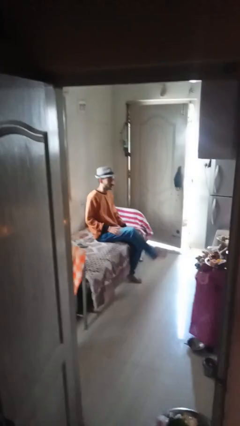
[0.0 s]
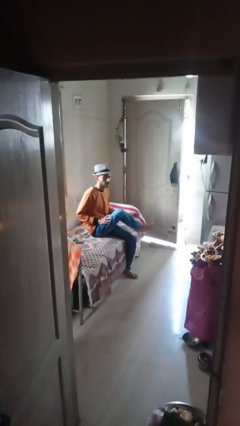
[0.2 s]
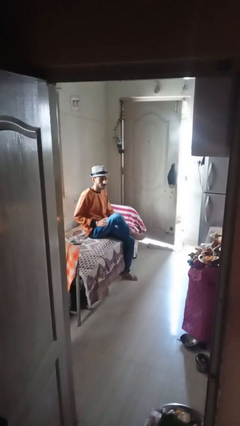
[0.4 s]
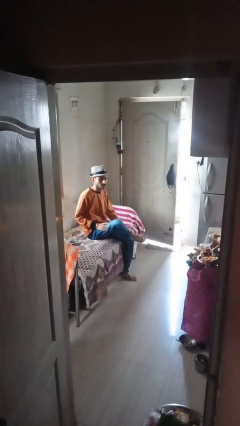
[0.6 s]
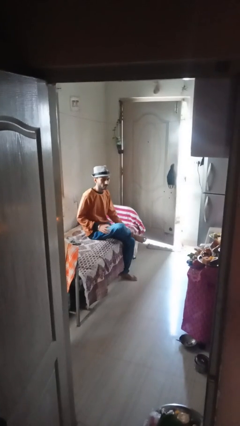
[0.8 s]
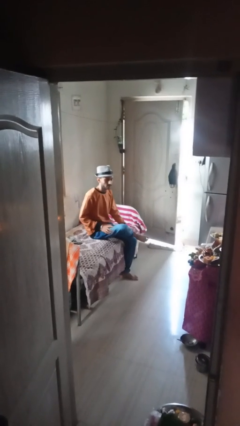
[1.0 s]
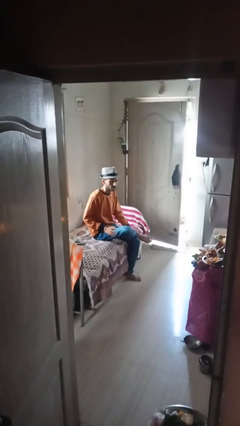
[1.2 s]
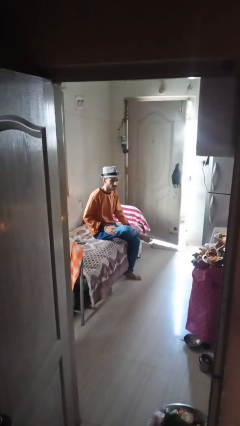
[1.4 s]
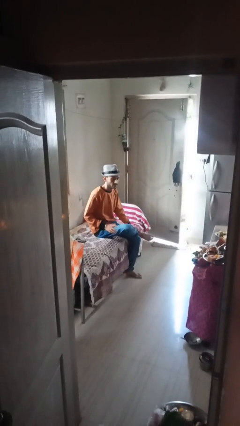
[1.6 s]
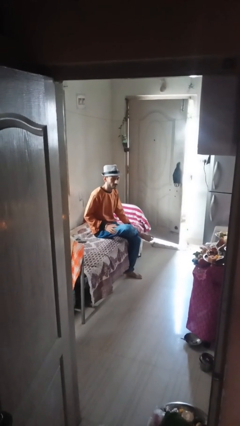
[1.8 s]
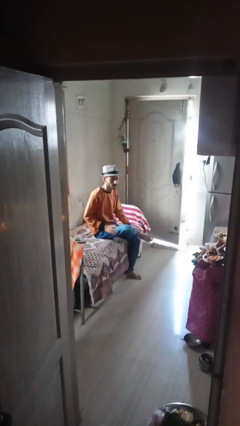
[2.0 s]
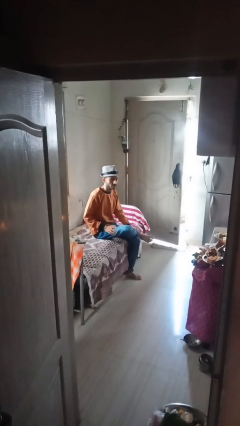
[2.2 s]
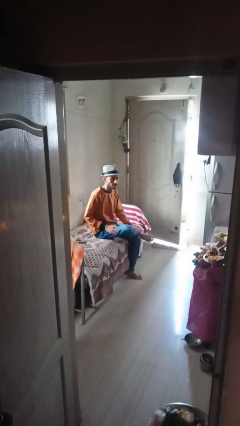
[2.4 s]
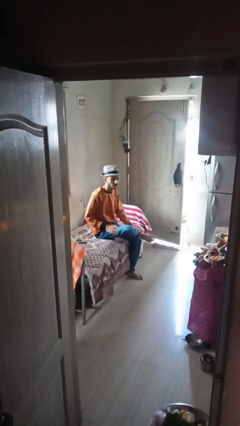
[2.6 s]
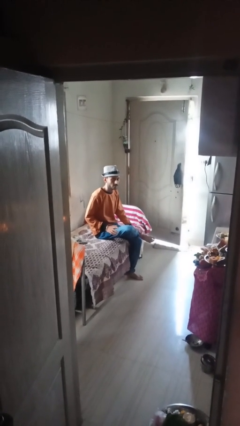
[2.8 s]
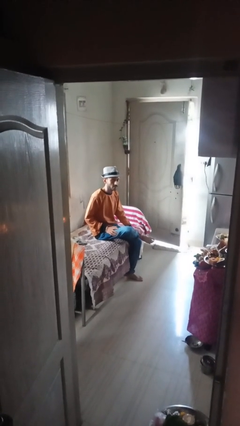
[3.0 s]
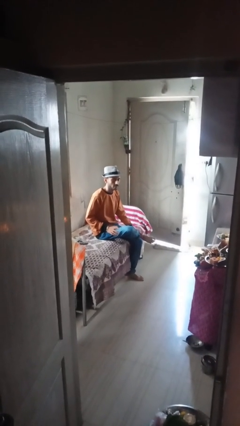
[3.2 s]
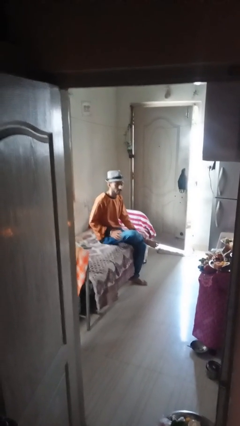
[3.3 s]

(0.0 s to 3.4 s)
person crosses legs

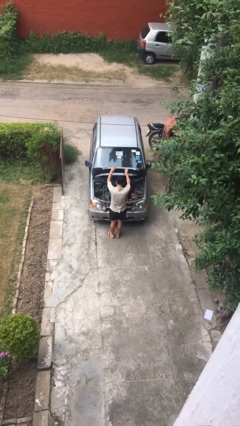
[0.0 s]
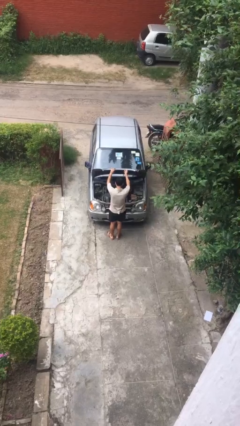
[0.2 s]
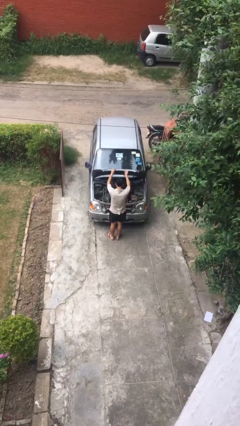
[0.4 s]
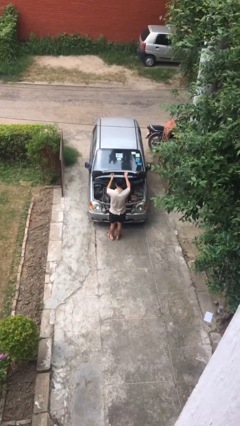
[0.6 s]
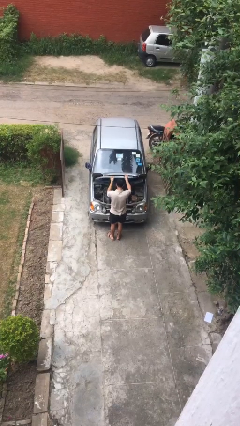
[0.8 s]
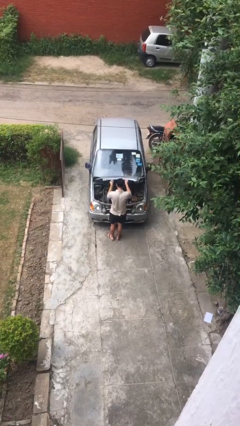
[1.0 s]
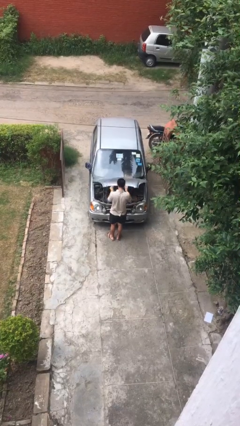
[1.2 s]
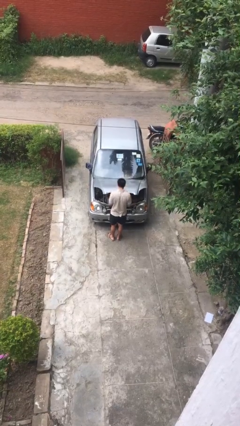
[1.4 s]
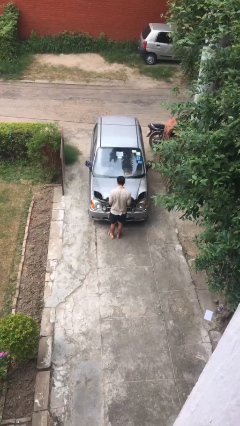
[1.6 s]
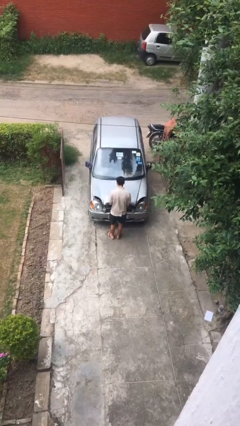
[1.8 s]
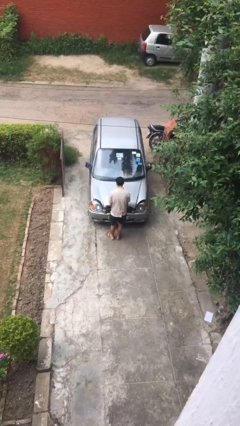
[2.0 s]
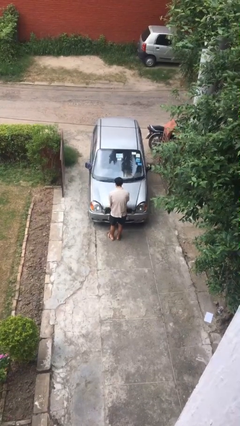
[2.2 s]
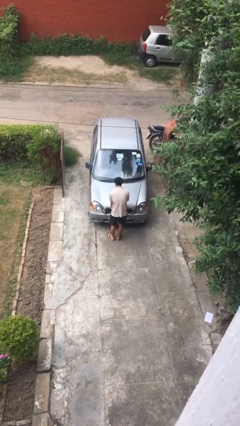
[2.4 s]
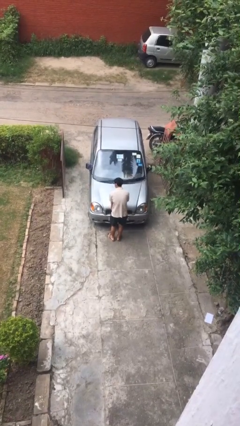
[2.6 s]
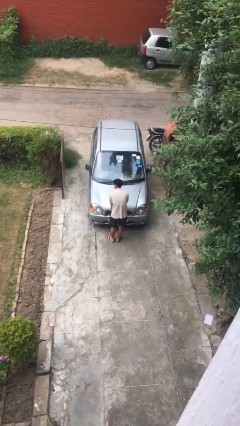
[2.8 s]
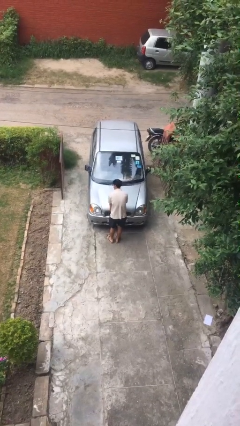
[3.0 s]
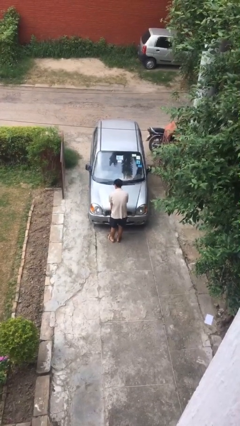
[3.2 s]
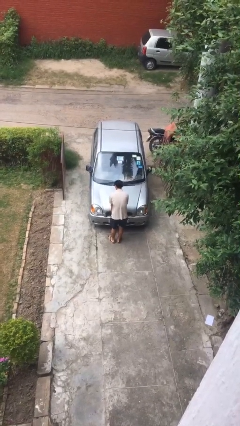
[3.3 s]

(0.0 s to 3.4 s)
person closes car hood

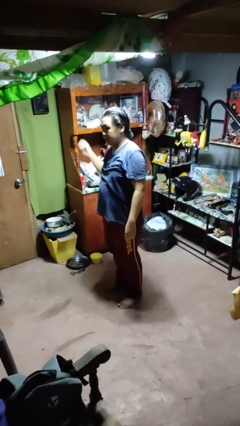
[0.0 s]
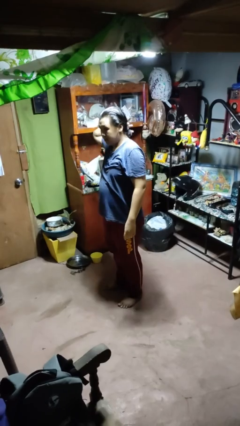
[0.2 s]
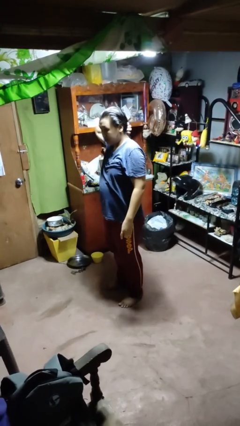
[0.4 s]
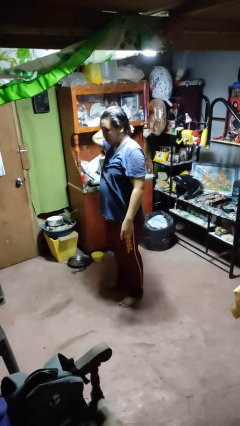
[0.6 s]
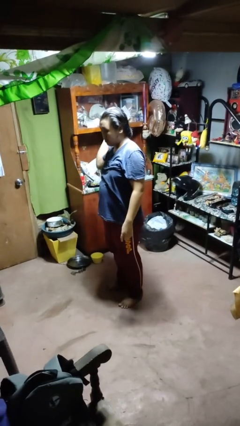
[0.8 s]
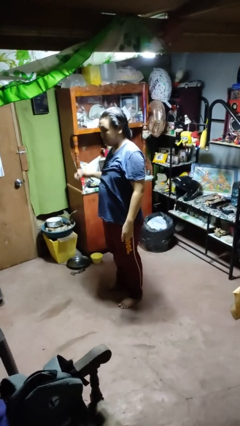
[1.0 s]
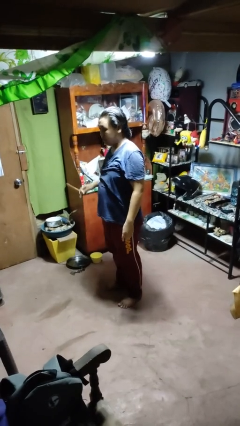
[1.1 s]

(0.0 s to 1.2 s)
person takes off hairtie

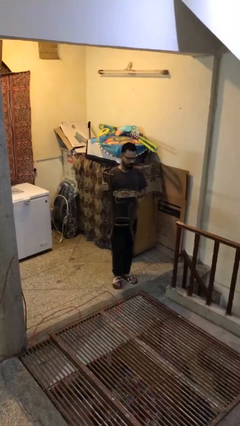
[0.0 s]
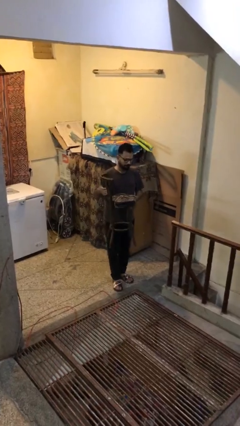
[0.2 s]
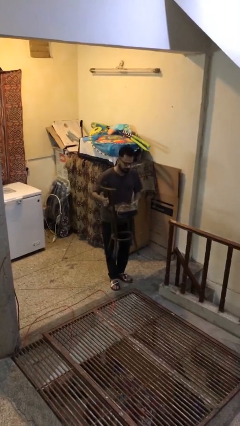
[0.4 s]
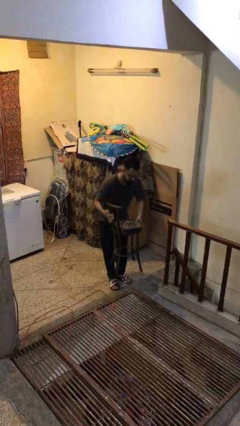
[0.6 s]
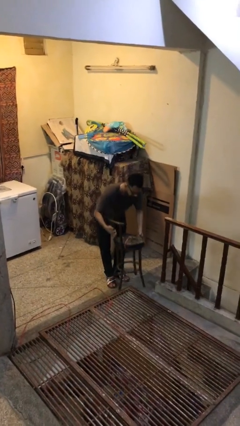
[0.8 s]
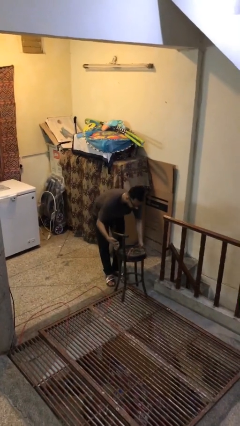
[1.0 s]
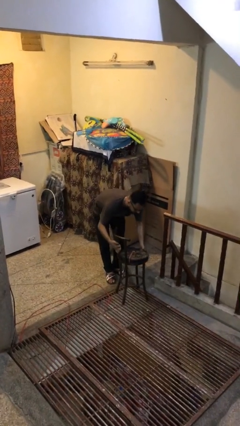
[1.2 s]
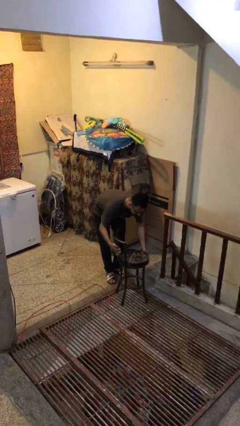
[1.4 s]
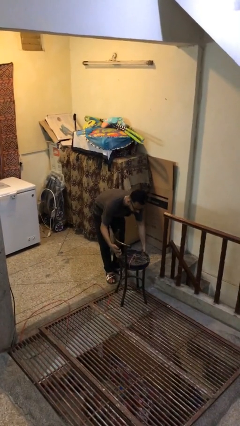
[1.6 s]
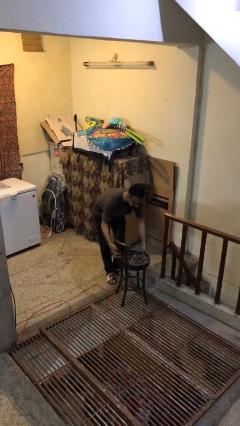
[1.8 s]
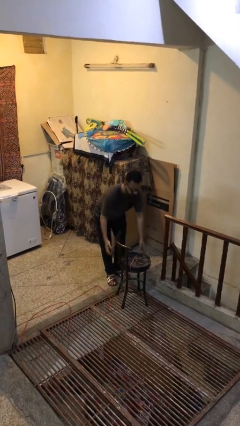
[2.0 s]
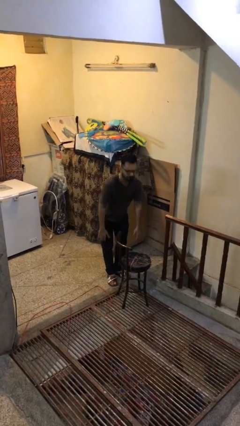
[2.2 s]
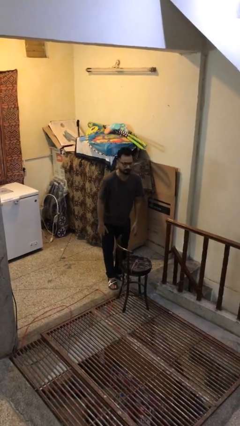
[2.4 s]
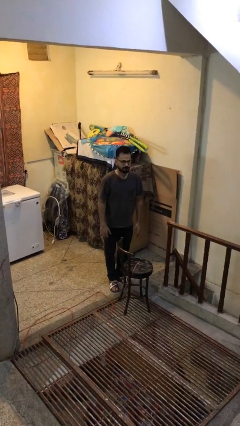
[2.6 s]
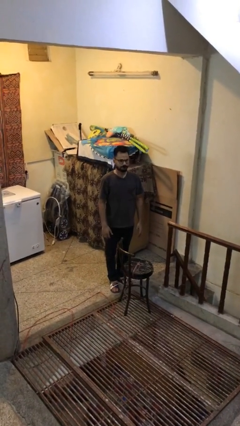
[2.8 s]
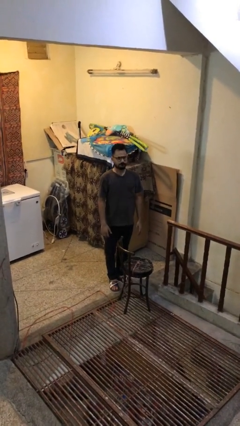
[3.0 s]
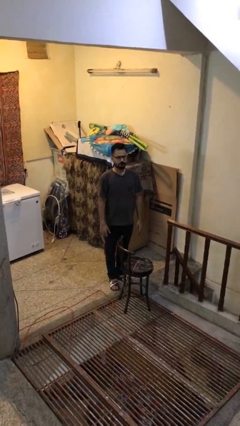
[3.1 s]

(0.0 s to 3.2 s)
person puts down object on floor

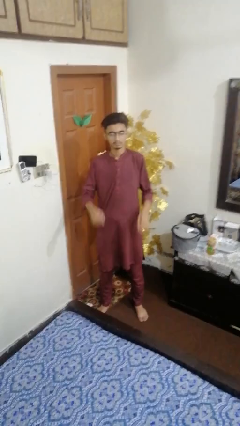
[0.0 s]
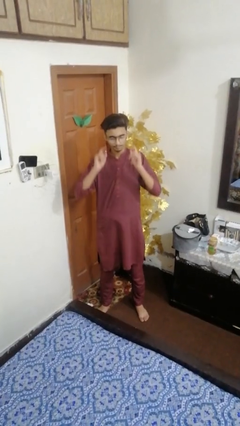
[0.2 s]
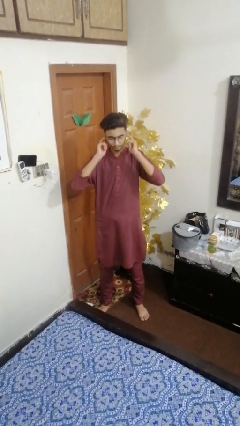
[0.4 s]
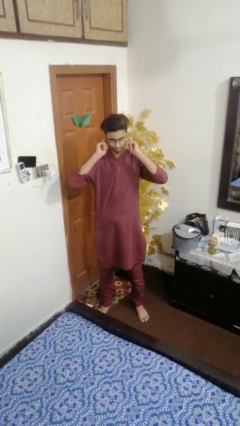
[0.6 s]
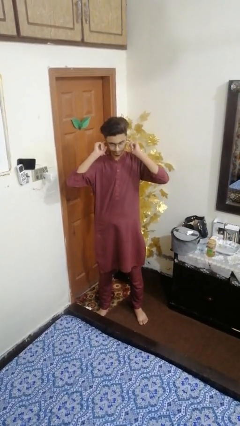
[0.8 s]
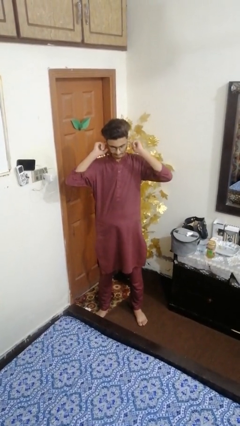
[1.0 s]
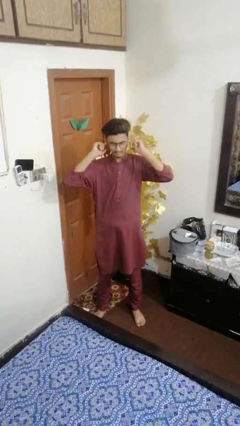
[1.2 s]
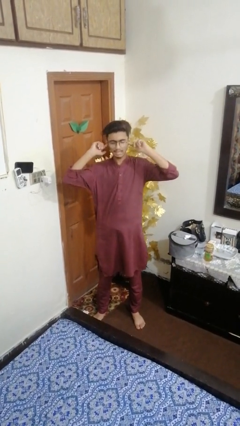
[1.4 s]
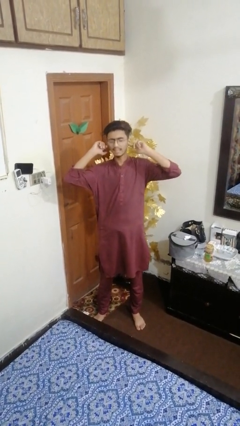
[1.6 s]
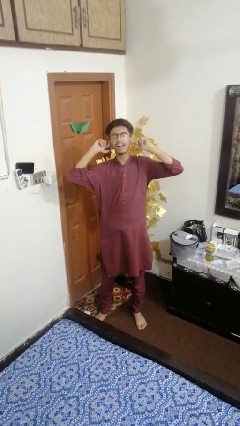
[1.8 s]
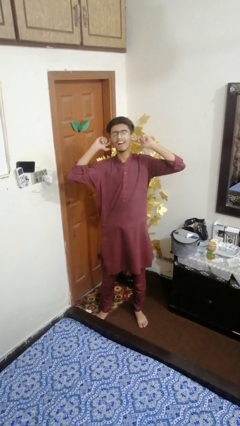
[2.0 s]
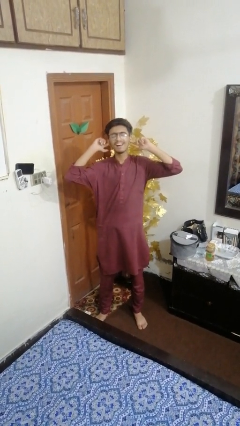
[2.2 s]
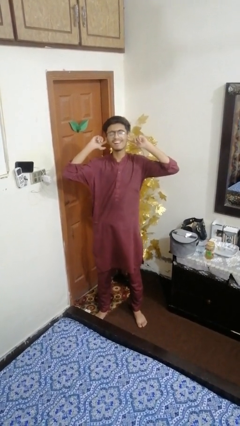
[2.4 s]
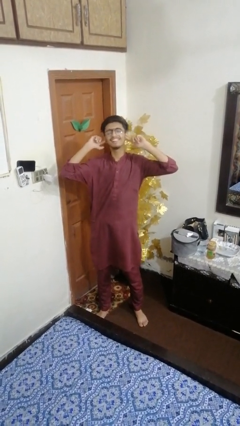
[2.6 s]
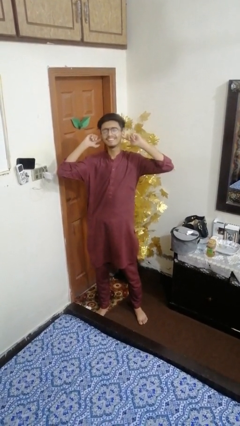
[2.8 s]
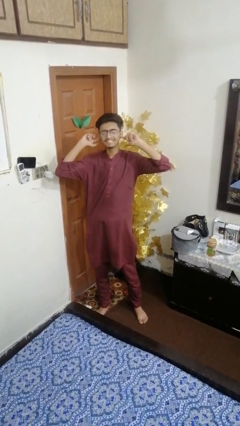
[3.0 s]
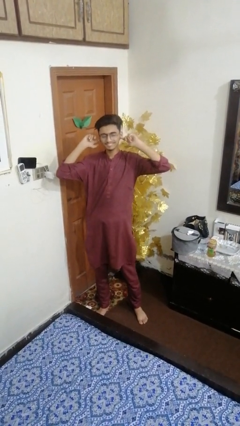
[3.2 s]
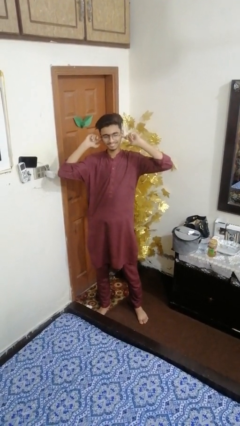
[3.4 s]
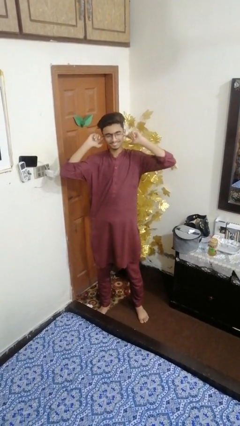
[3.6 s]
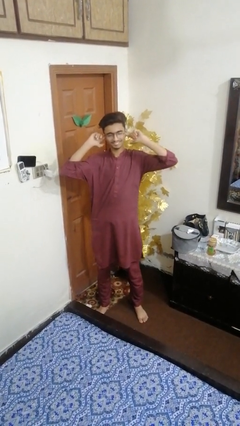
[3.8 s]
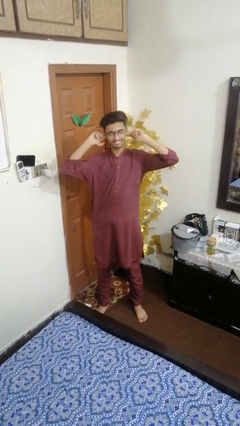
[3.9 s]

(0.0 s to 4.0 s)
person puts fingers in ear

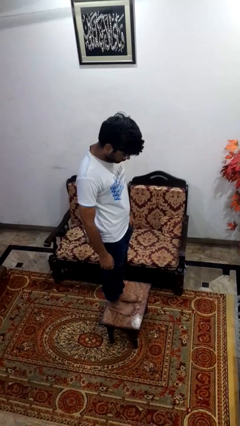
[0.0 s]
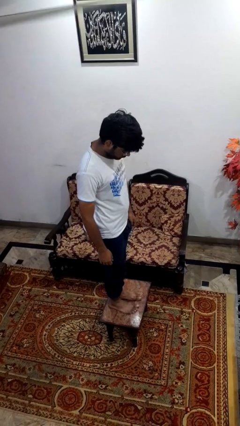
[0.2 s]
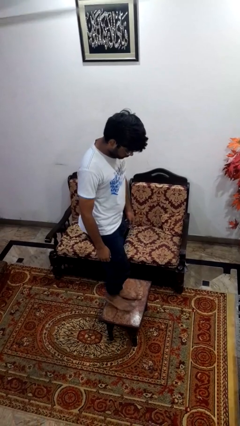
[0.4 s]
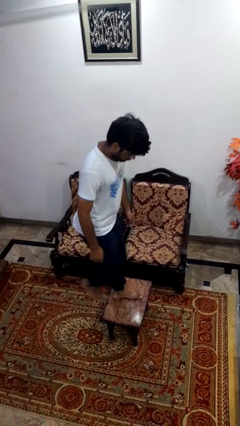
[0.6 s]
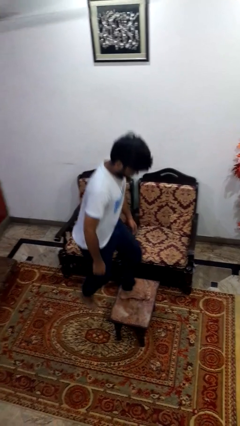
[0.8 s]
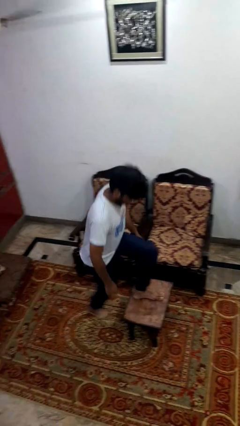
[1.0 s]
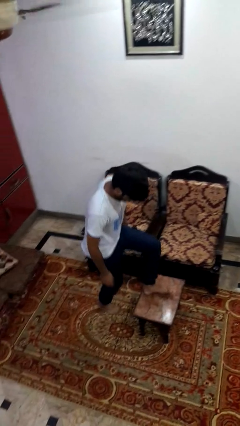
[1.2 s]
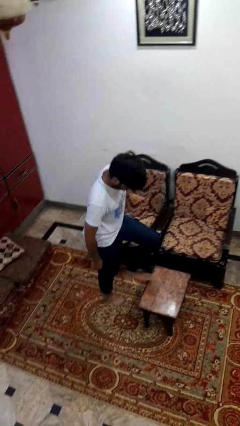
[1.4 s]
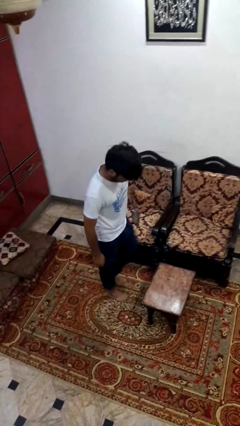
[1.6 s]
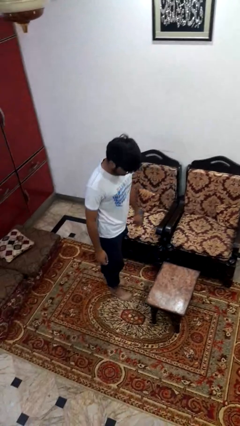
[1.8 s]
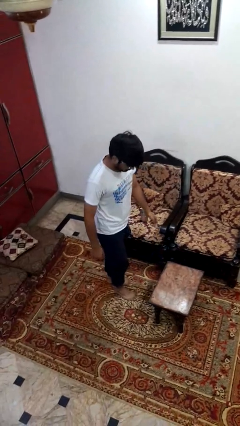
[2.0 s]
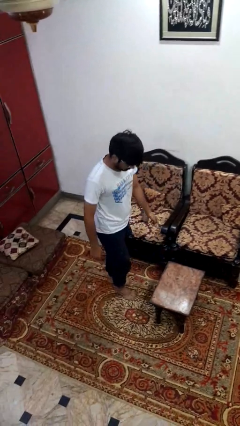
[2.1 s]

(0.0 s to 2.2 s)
person climbs off table
